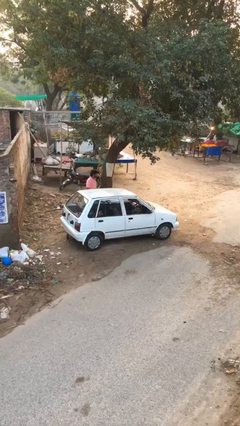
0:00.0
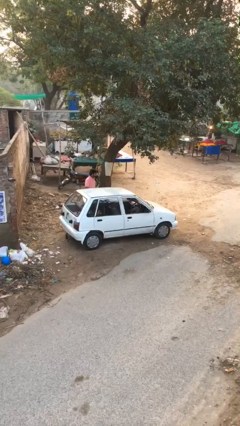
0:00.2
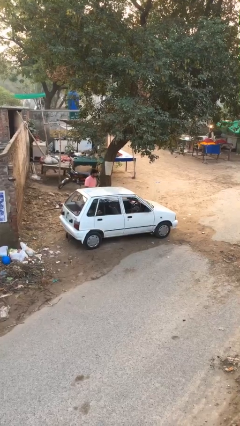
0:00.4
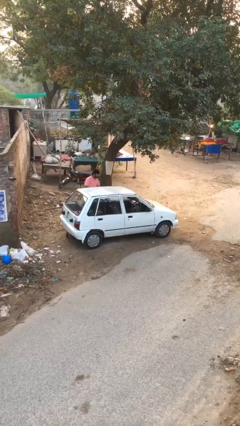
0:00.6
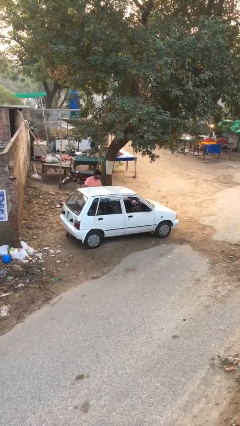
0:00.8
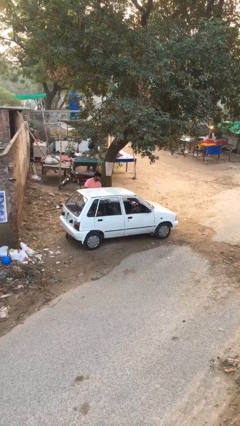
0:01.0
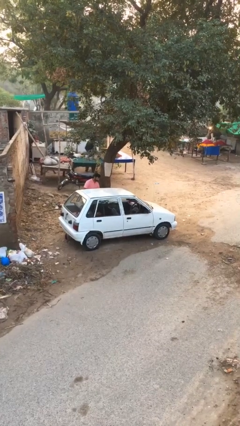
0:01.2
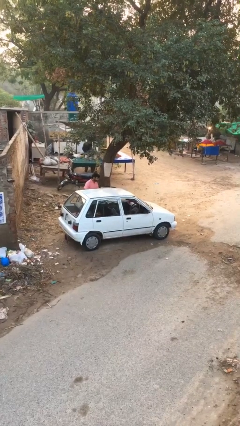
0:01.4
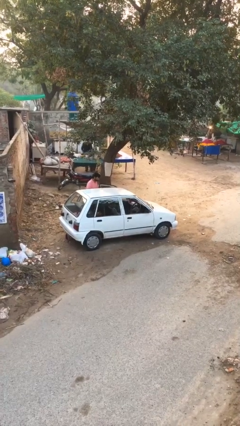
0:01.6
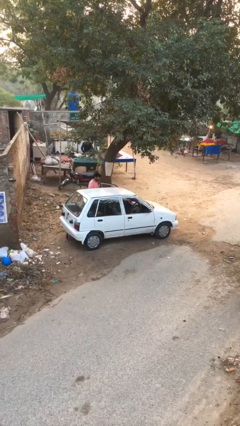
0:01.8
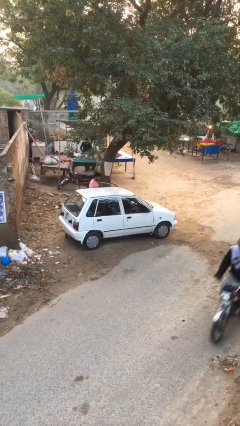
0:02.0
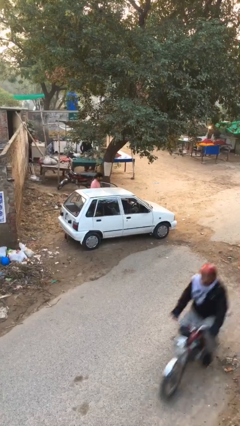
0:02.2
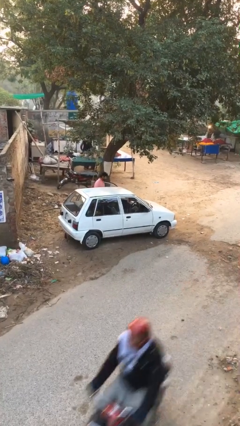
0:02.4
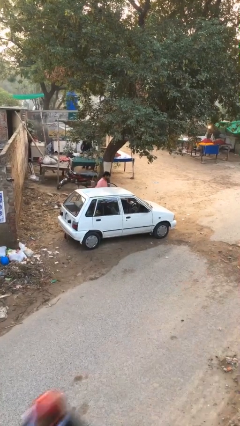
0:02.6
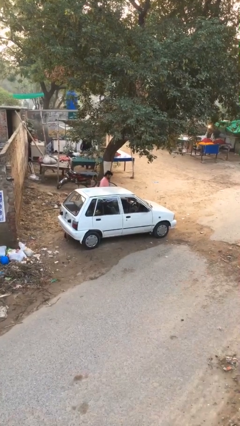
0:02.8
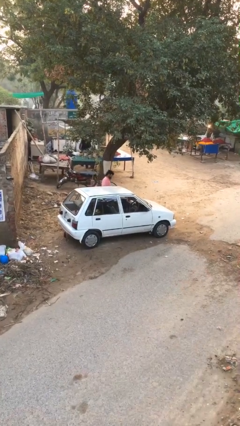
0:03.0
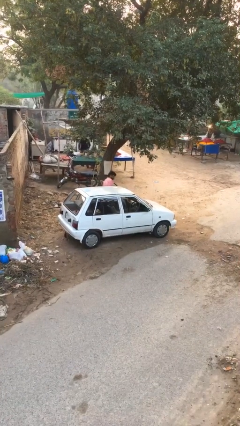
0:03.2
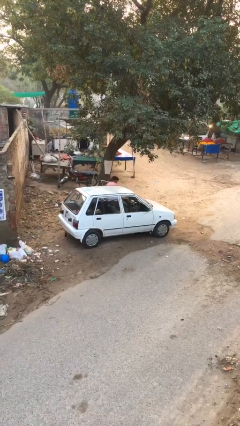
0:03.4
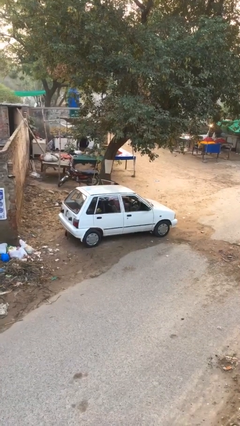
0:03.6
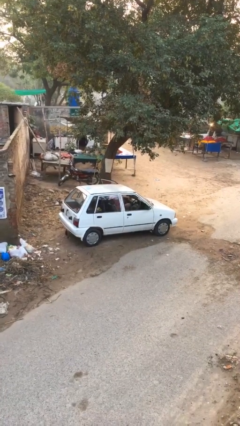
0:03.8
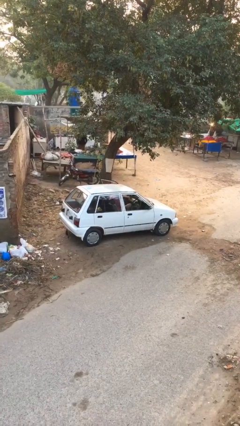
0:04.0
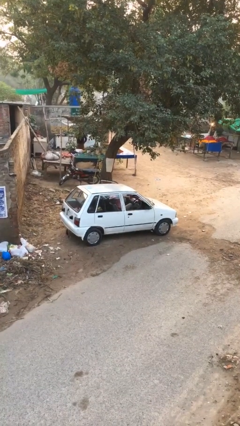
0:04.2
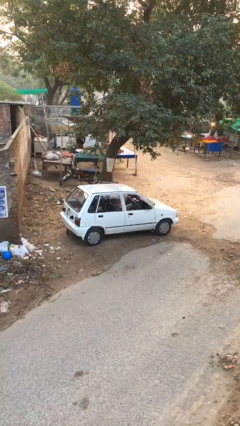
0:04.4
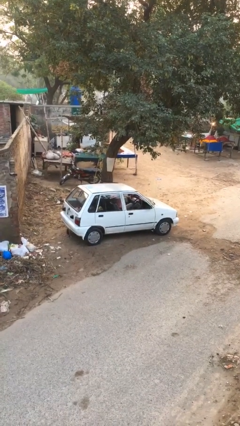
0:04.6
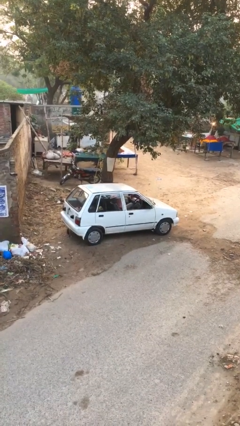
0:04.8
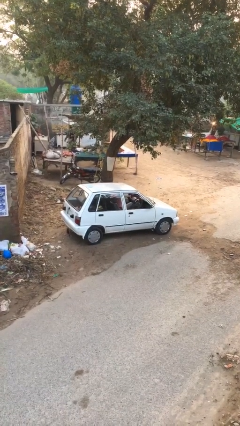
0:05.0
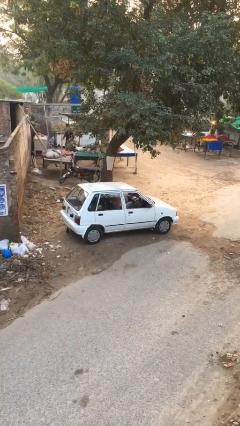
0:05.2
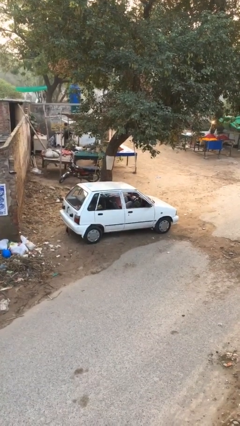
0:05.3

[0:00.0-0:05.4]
car picks up person

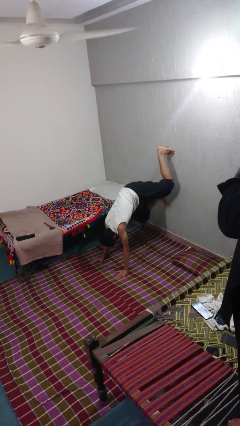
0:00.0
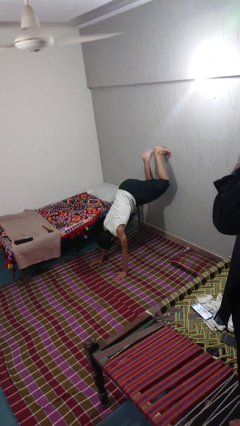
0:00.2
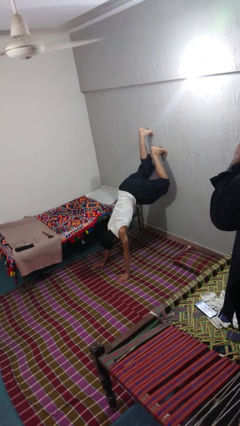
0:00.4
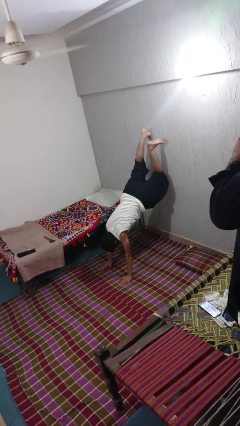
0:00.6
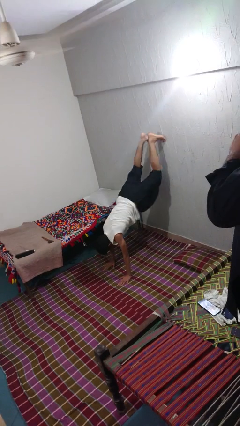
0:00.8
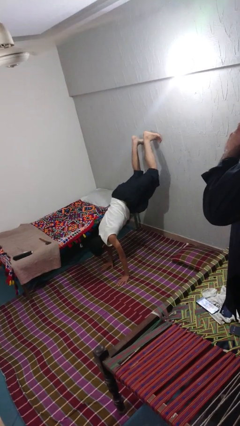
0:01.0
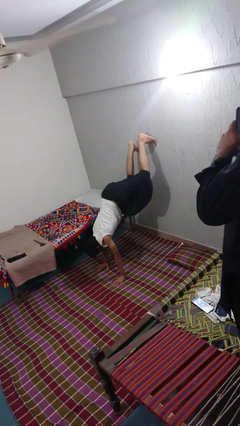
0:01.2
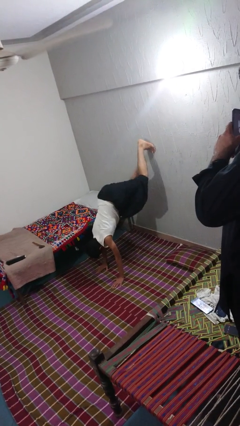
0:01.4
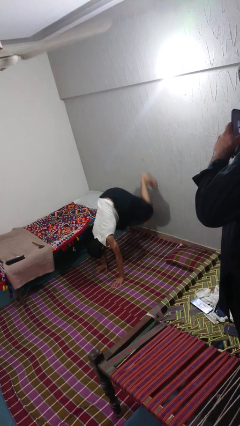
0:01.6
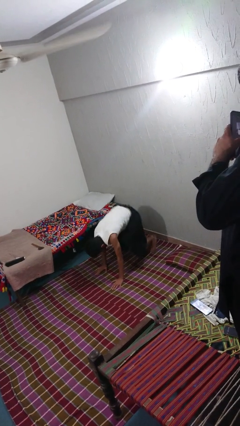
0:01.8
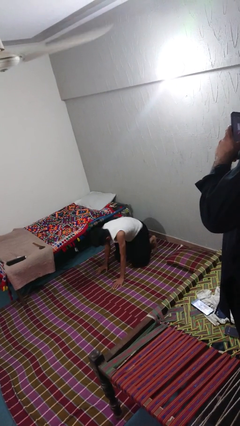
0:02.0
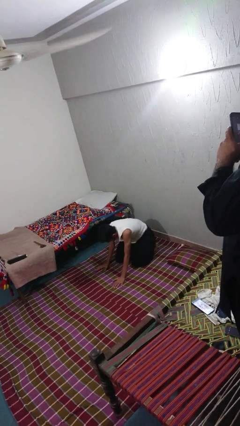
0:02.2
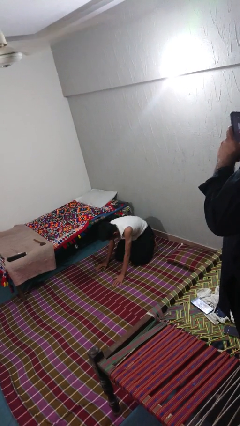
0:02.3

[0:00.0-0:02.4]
person handstand

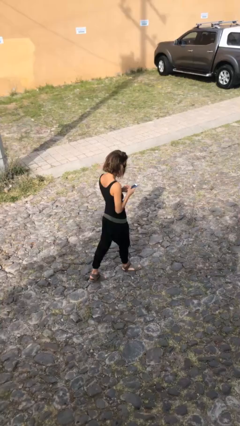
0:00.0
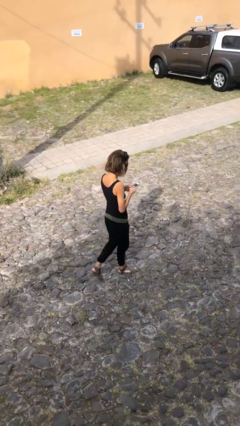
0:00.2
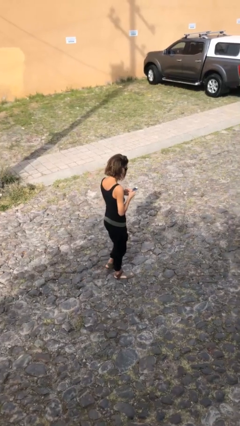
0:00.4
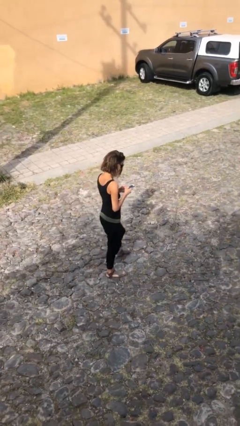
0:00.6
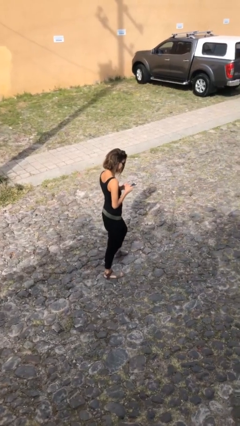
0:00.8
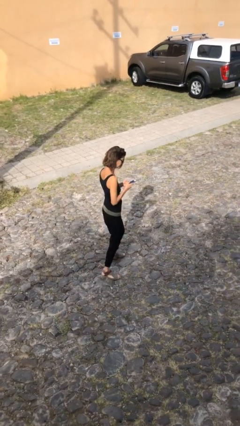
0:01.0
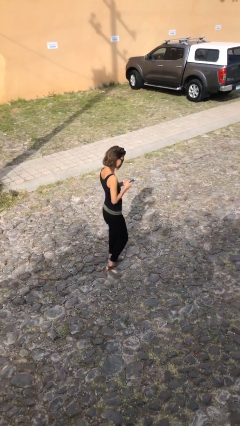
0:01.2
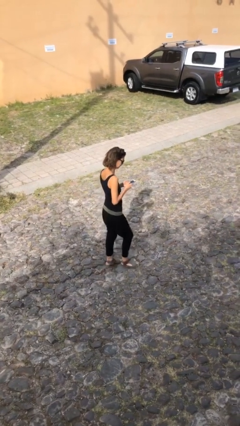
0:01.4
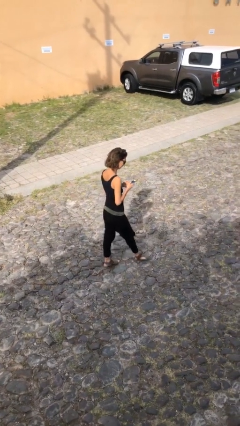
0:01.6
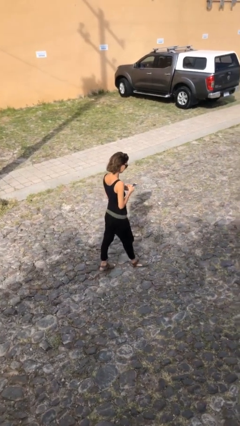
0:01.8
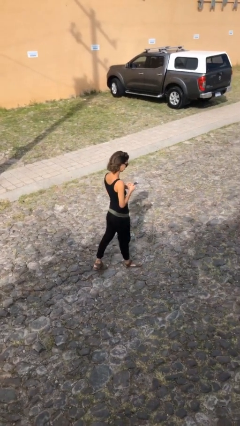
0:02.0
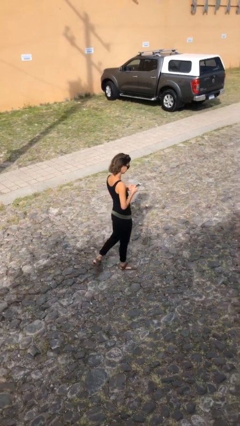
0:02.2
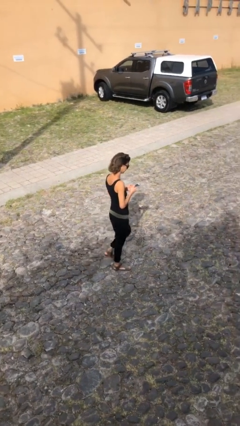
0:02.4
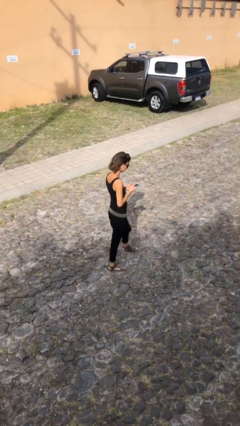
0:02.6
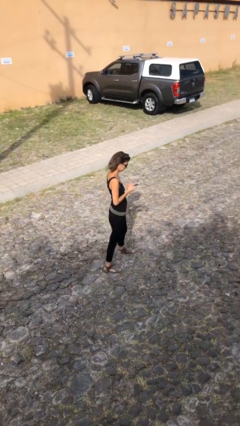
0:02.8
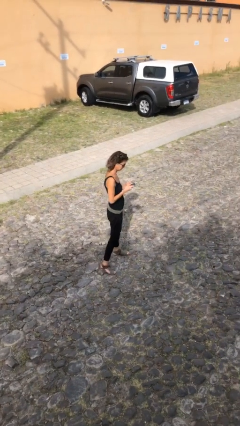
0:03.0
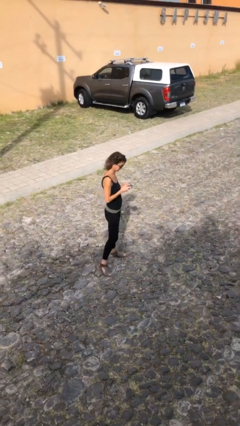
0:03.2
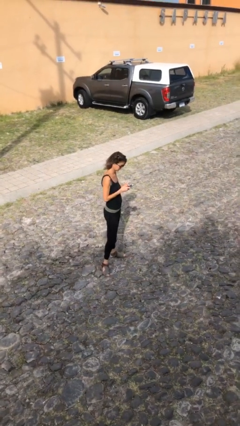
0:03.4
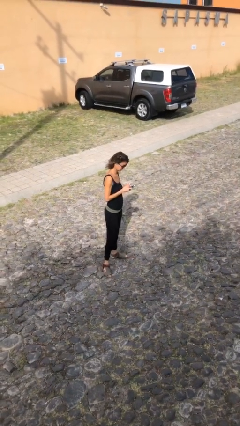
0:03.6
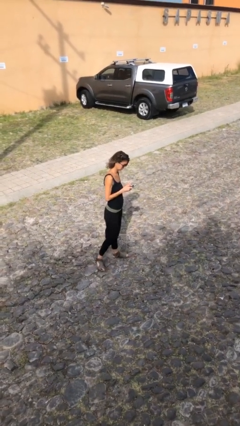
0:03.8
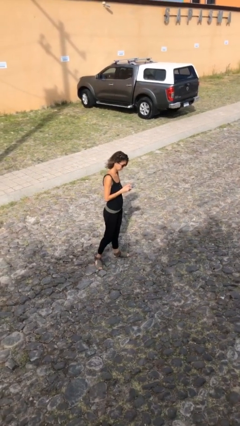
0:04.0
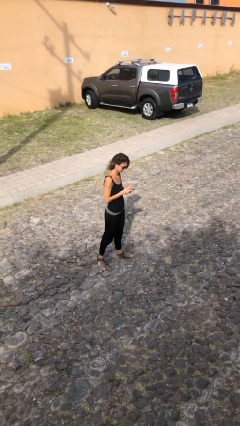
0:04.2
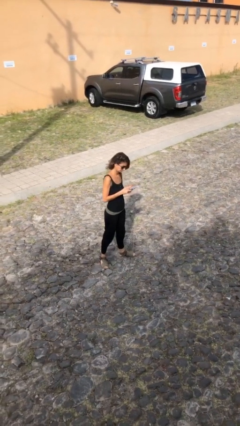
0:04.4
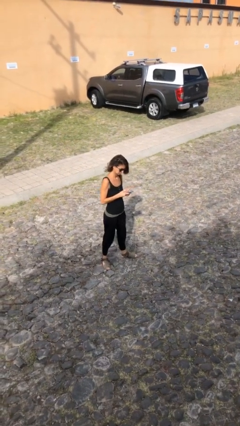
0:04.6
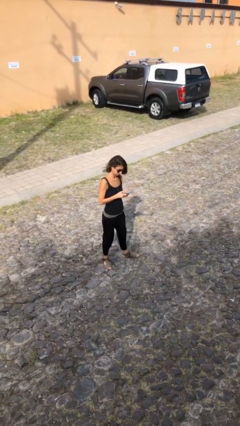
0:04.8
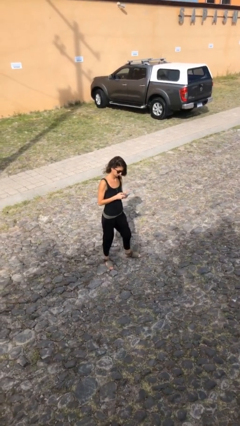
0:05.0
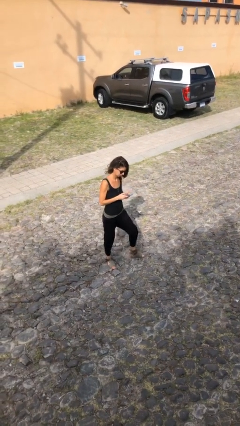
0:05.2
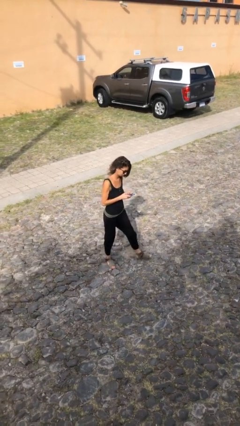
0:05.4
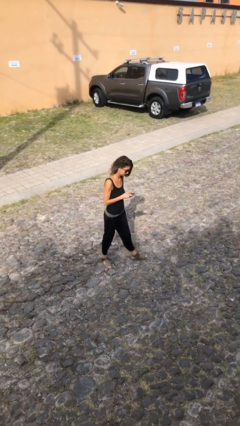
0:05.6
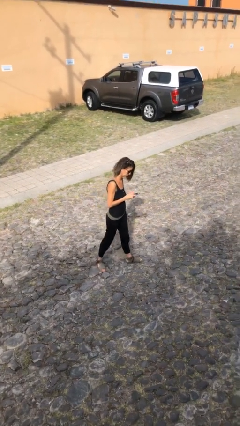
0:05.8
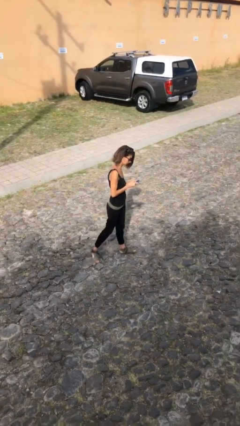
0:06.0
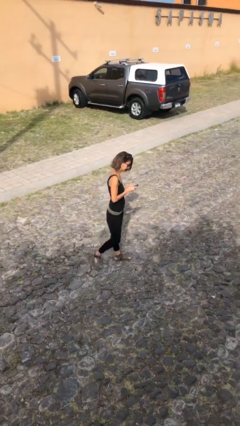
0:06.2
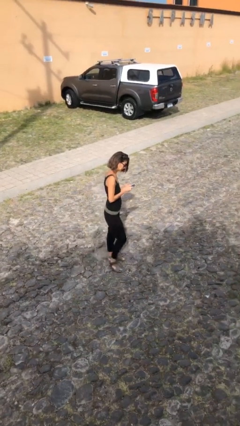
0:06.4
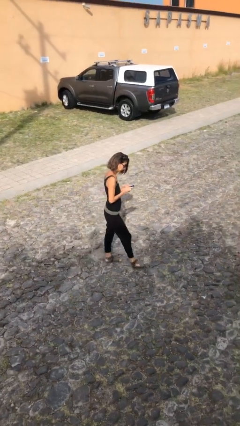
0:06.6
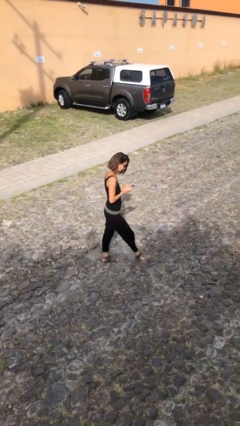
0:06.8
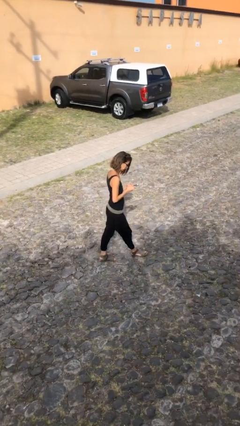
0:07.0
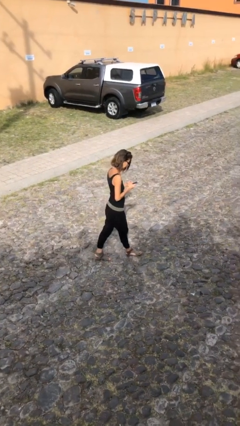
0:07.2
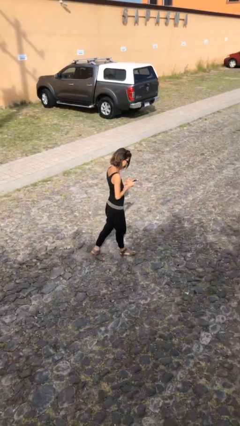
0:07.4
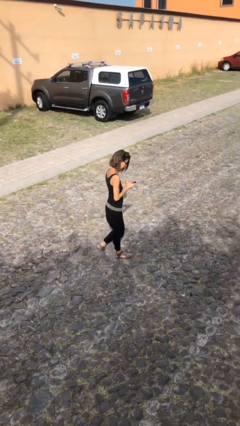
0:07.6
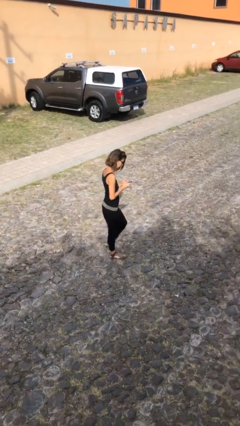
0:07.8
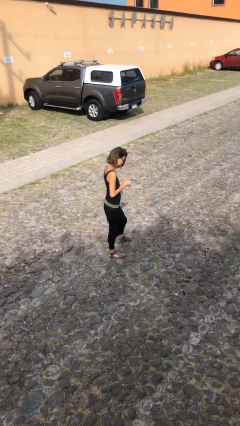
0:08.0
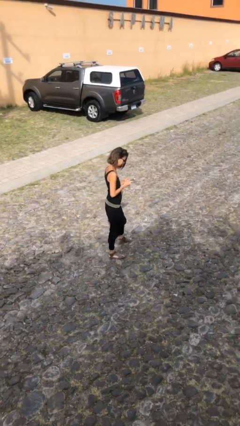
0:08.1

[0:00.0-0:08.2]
person texts on phone

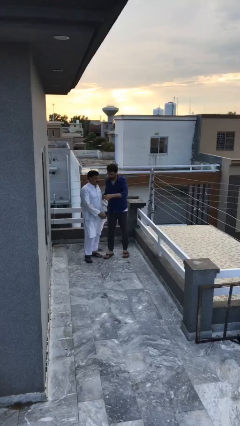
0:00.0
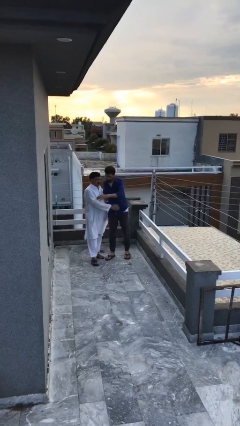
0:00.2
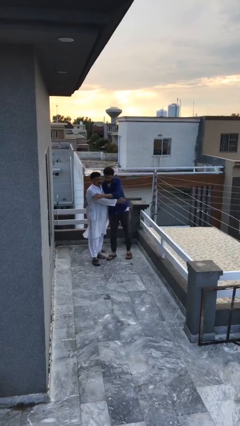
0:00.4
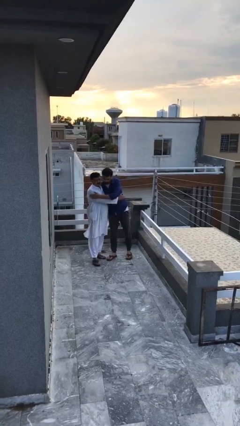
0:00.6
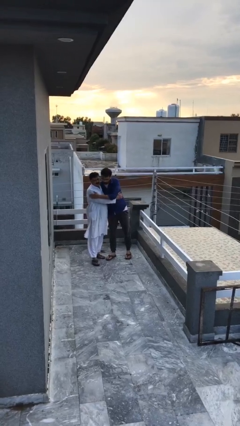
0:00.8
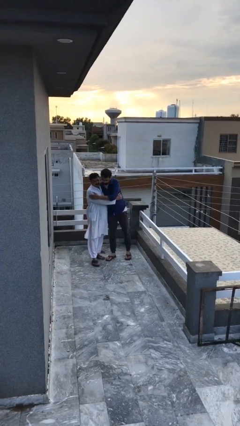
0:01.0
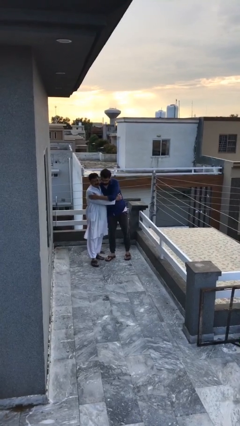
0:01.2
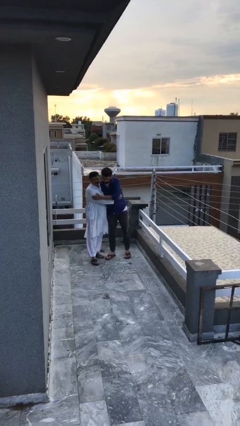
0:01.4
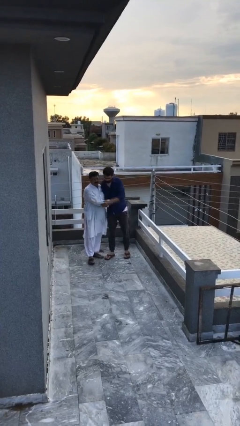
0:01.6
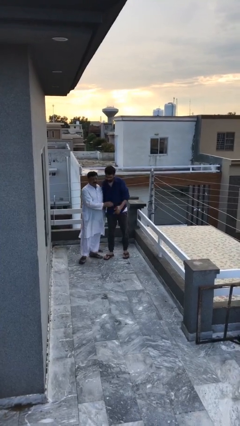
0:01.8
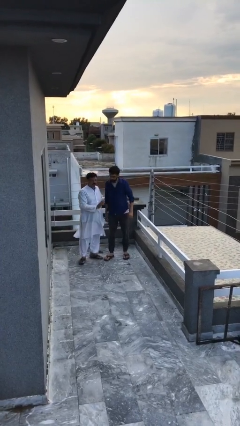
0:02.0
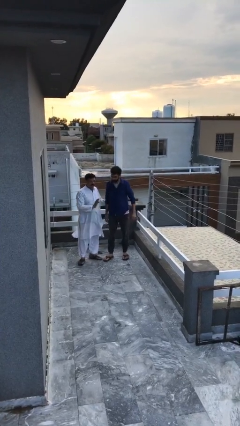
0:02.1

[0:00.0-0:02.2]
person embraces person
